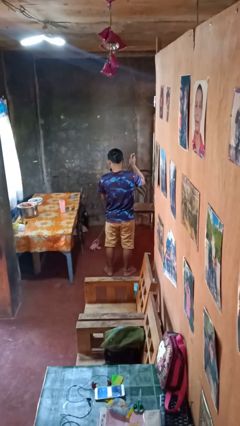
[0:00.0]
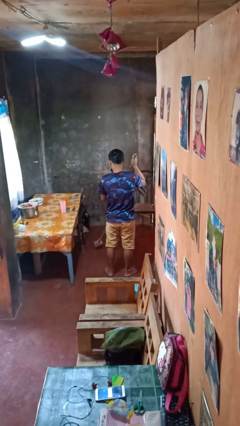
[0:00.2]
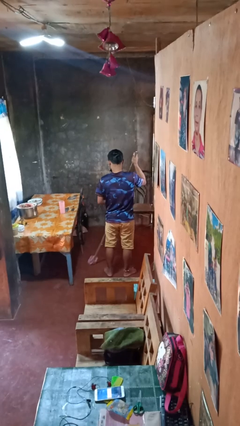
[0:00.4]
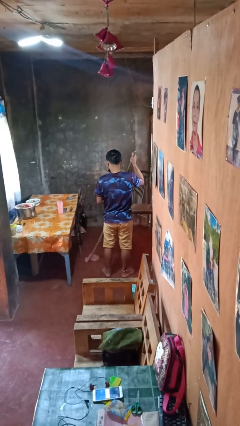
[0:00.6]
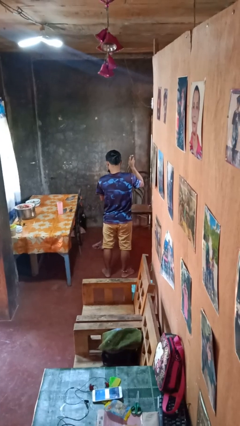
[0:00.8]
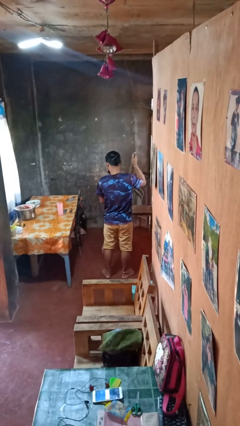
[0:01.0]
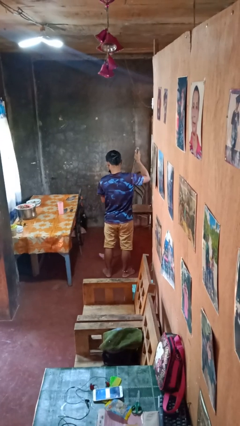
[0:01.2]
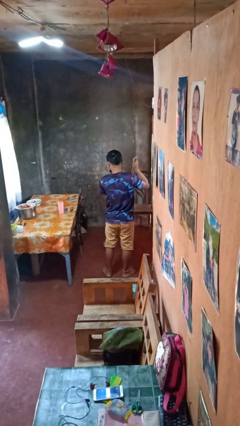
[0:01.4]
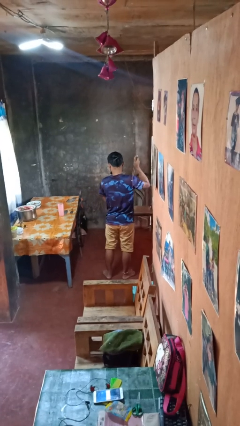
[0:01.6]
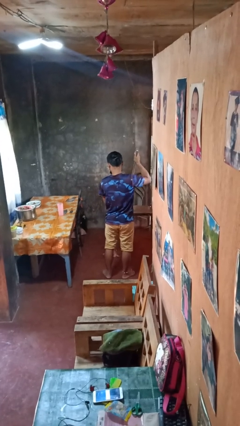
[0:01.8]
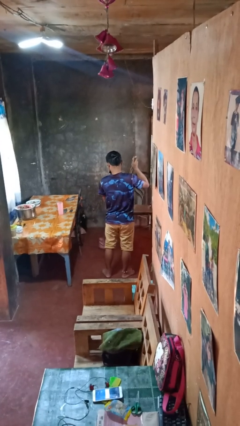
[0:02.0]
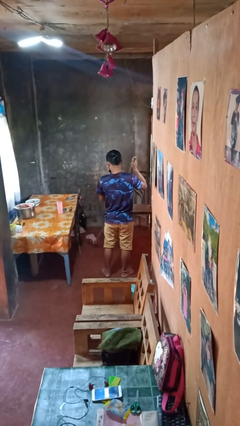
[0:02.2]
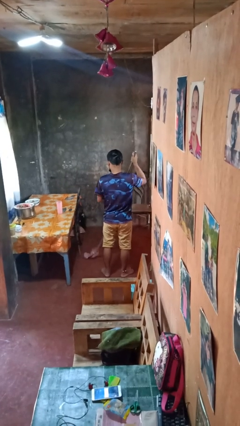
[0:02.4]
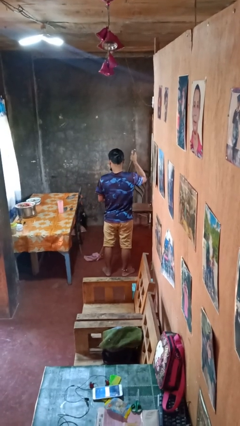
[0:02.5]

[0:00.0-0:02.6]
person mops

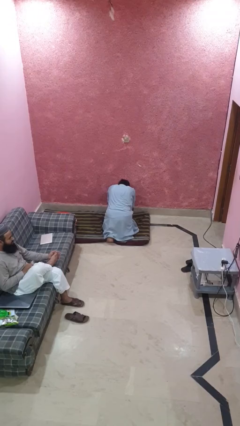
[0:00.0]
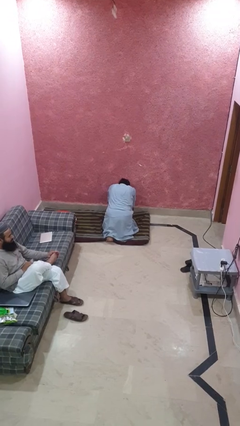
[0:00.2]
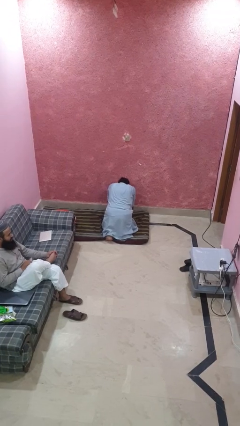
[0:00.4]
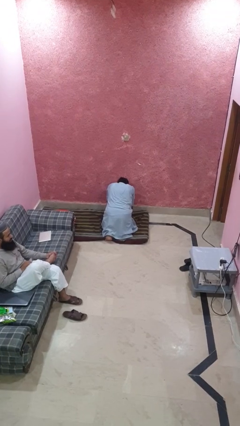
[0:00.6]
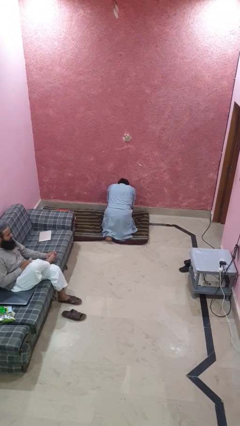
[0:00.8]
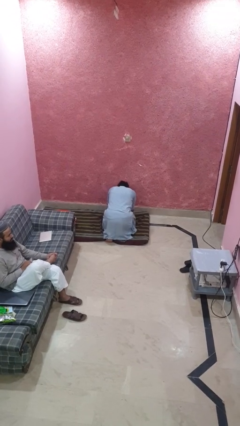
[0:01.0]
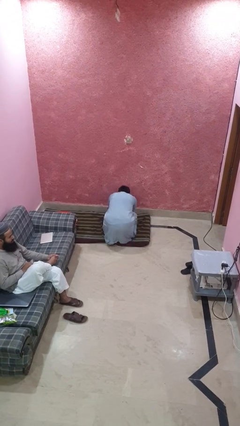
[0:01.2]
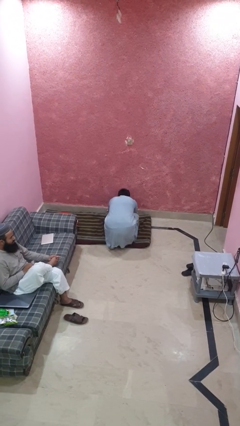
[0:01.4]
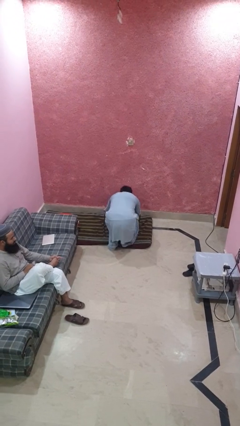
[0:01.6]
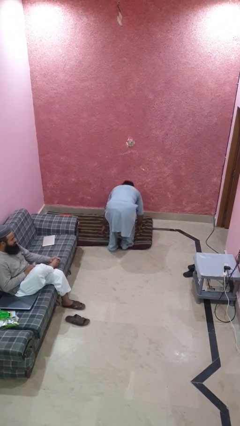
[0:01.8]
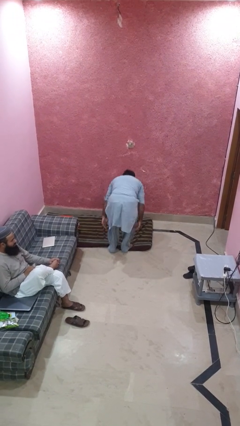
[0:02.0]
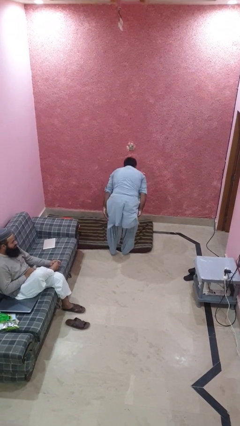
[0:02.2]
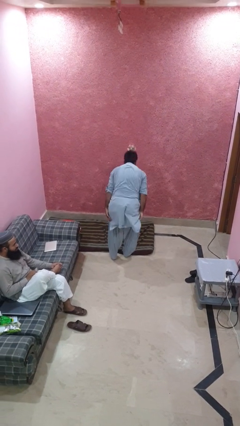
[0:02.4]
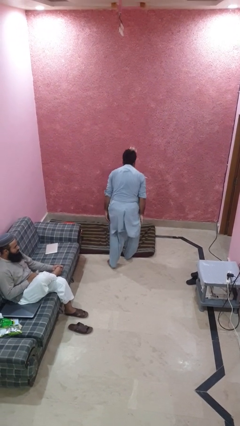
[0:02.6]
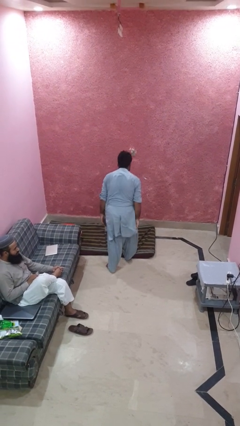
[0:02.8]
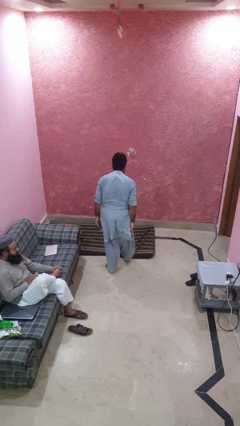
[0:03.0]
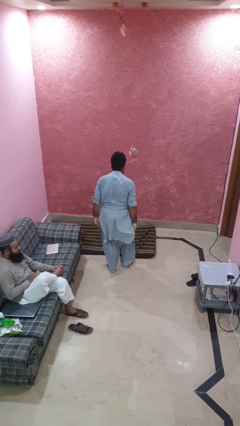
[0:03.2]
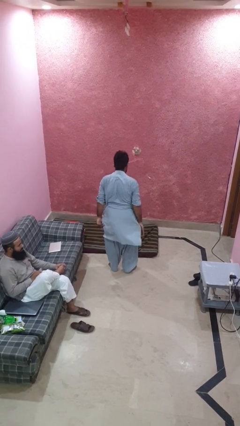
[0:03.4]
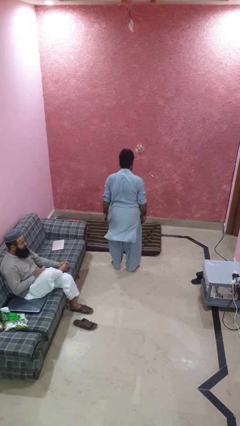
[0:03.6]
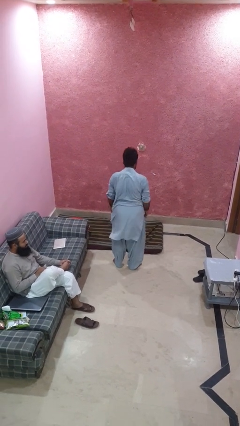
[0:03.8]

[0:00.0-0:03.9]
person stands up from floor

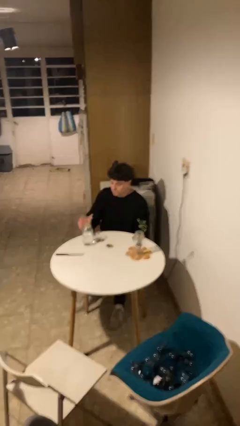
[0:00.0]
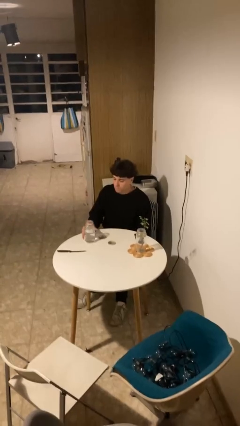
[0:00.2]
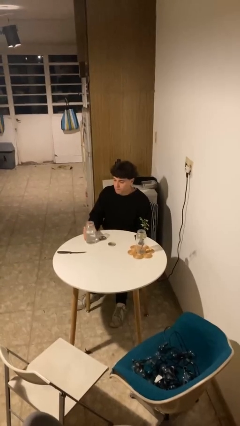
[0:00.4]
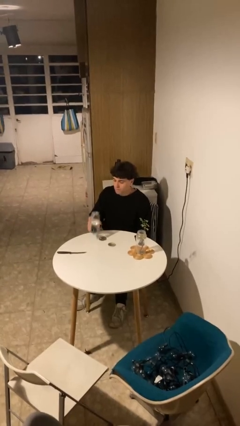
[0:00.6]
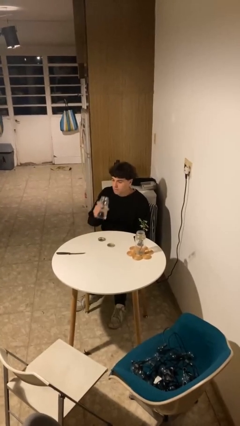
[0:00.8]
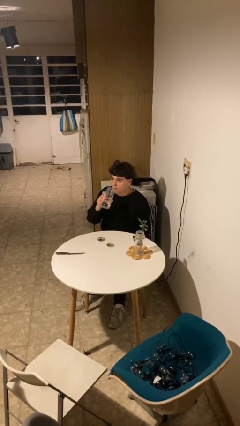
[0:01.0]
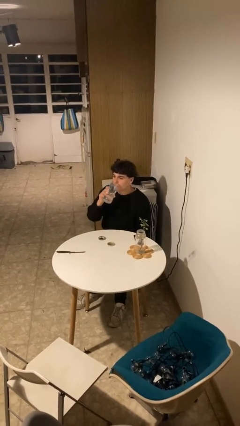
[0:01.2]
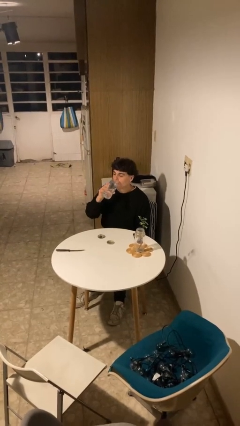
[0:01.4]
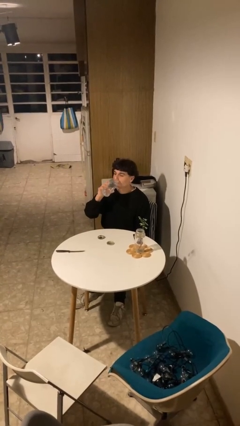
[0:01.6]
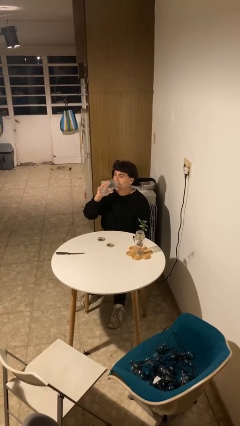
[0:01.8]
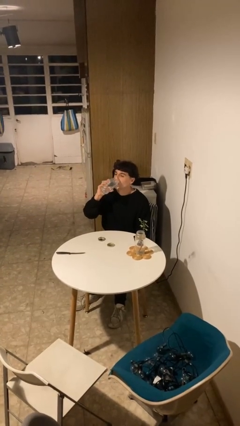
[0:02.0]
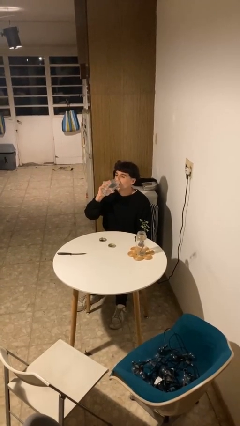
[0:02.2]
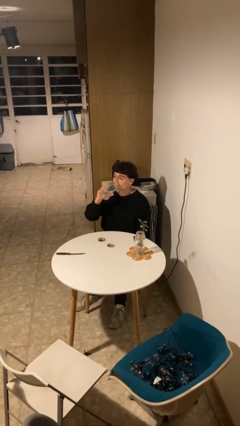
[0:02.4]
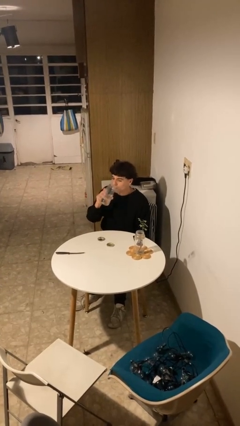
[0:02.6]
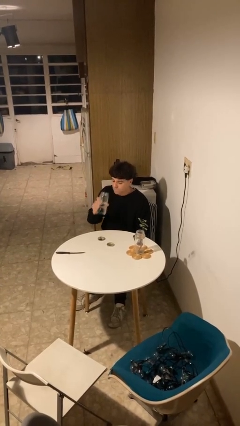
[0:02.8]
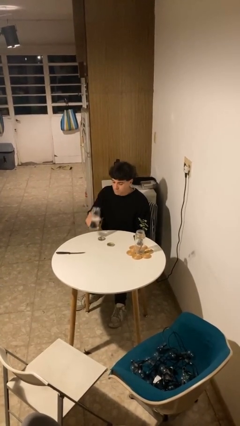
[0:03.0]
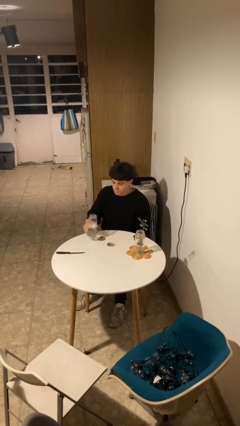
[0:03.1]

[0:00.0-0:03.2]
person drinks from cup

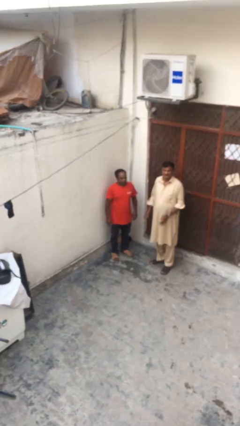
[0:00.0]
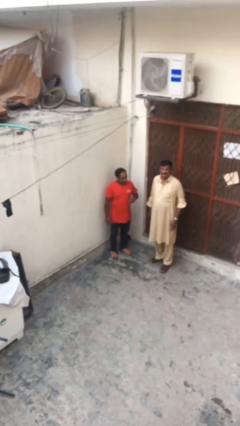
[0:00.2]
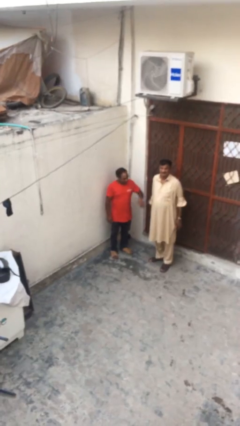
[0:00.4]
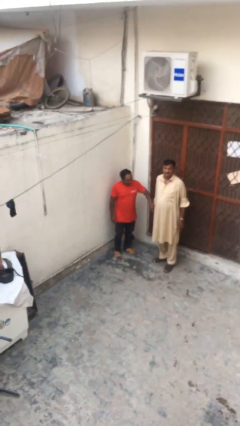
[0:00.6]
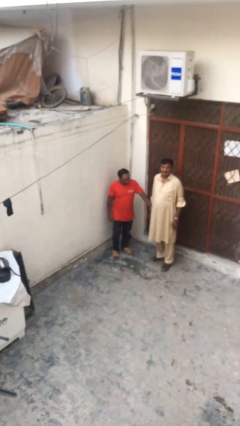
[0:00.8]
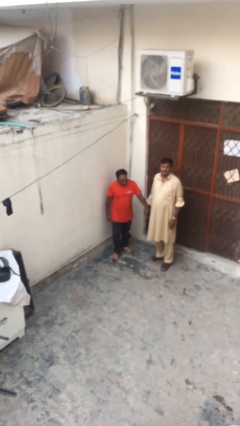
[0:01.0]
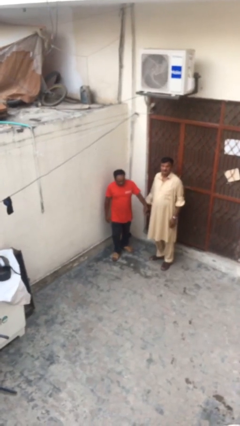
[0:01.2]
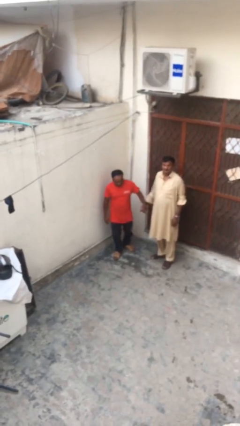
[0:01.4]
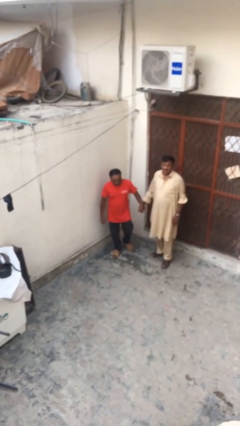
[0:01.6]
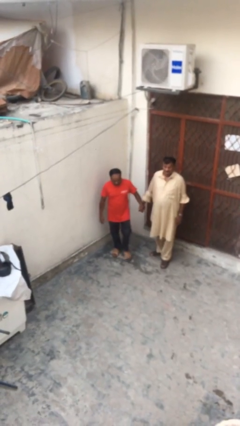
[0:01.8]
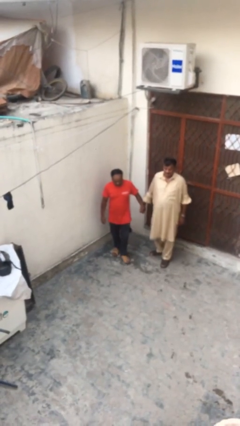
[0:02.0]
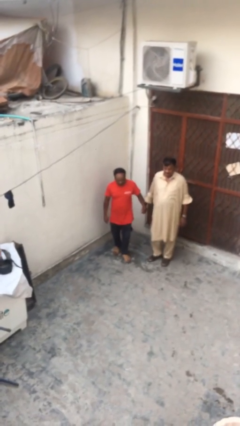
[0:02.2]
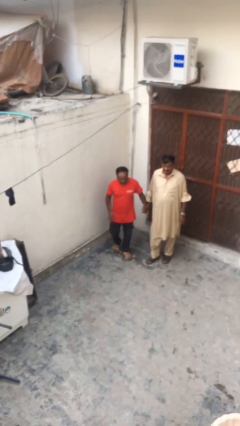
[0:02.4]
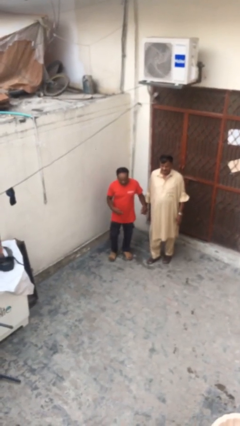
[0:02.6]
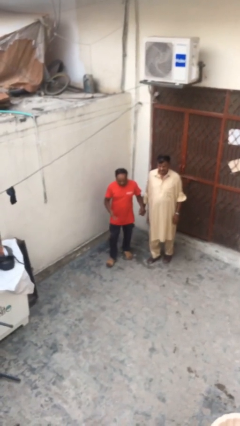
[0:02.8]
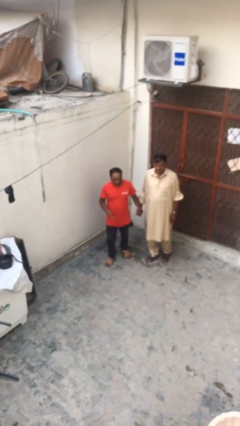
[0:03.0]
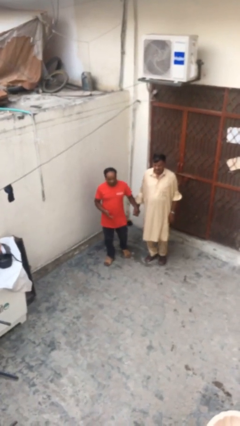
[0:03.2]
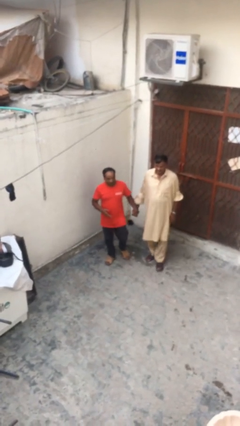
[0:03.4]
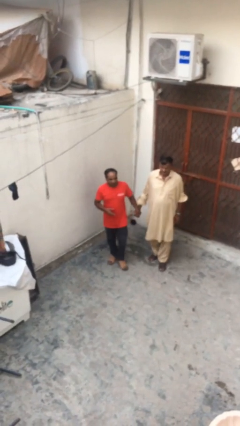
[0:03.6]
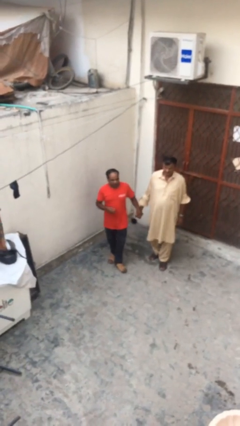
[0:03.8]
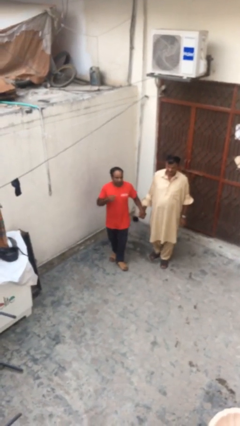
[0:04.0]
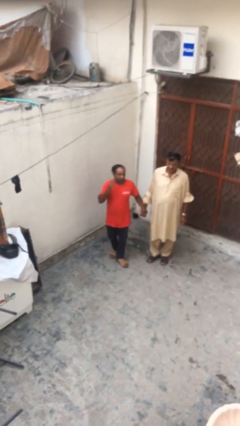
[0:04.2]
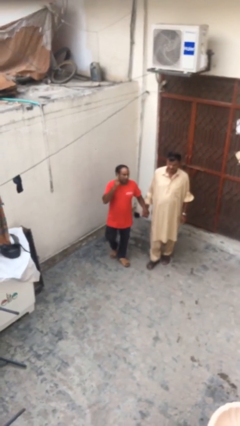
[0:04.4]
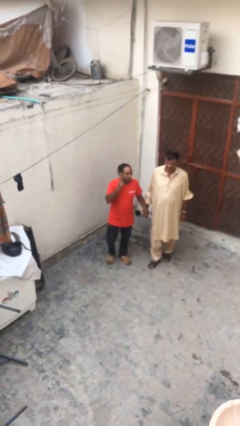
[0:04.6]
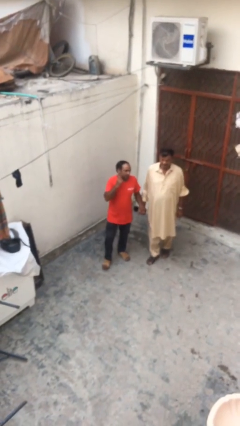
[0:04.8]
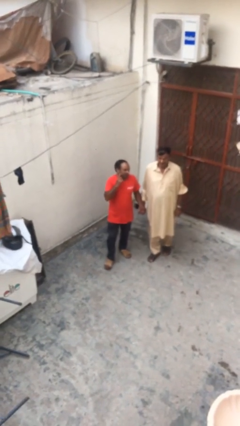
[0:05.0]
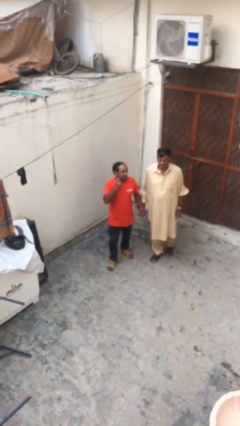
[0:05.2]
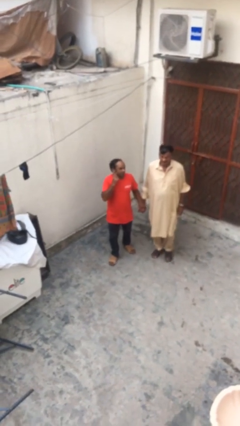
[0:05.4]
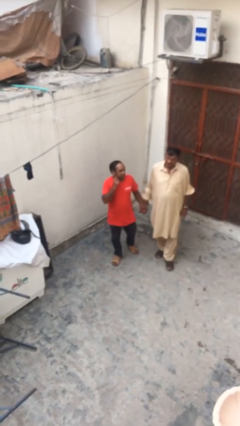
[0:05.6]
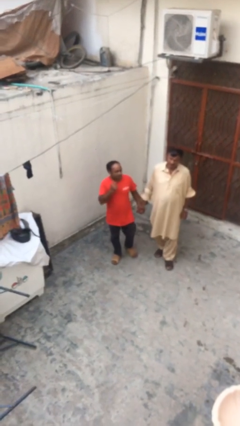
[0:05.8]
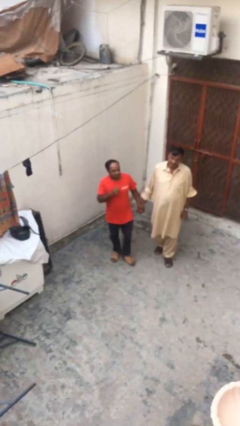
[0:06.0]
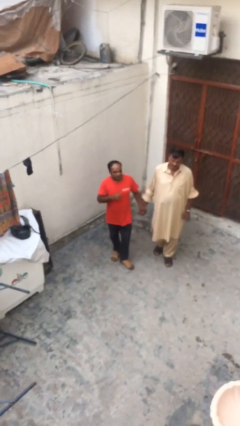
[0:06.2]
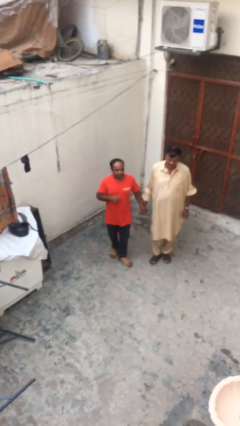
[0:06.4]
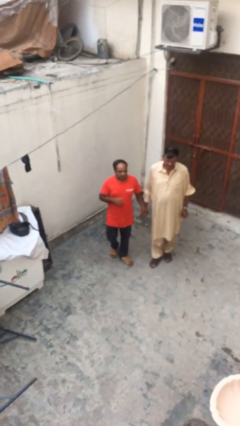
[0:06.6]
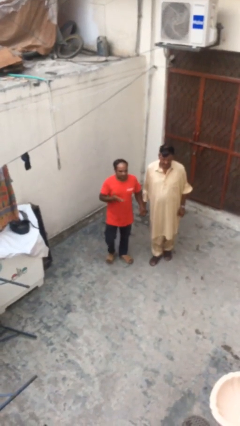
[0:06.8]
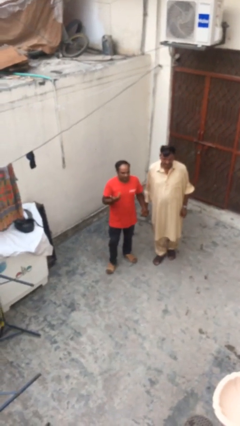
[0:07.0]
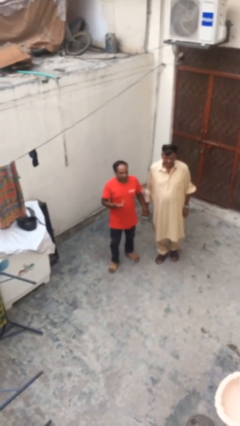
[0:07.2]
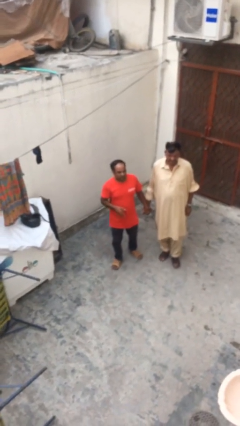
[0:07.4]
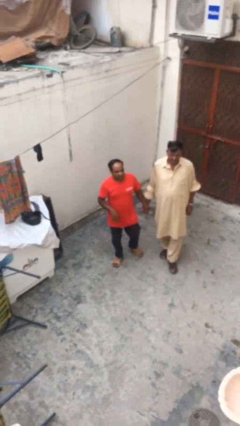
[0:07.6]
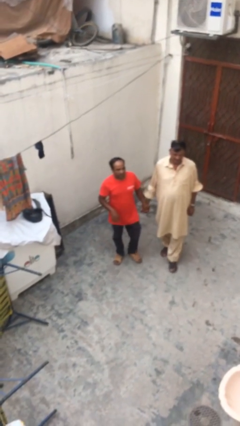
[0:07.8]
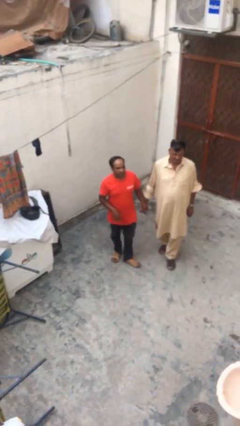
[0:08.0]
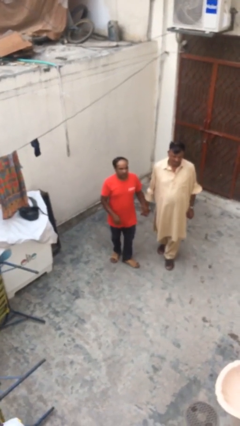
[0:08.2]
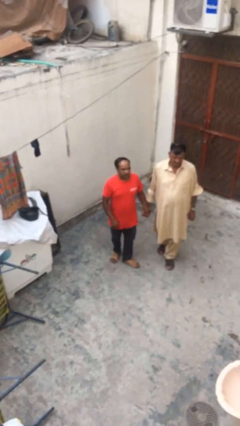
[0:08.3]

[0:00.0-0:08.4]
person holds hand
